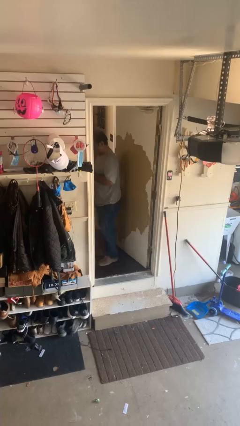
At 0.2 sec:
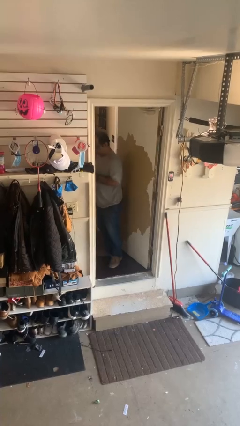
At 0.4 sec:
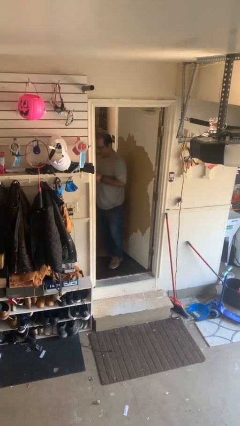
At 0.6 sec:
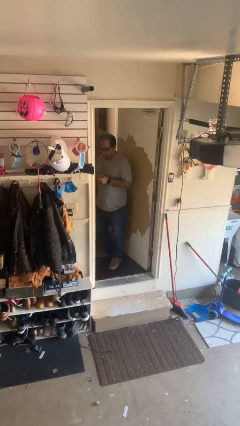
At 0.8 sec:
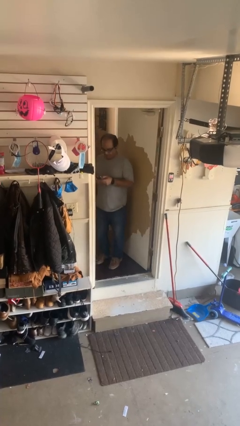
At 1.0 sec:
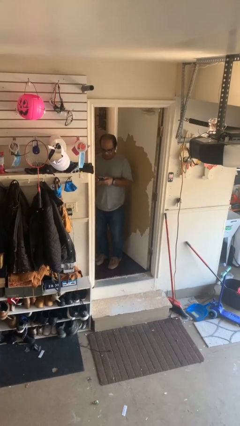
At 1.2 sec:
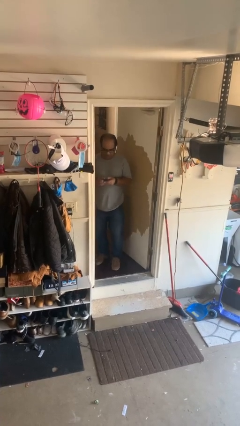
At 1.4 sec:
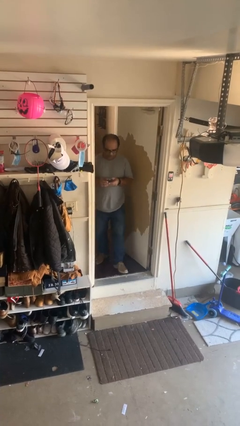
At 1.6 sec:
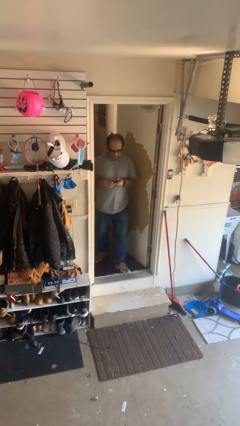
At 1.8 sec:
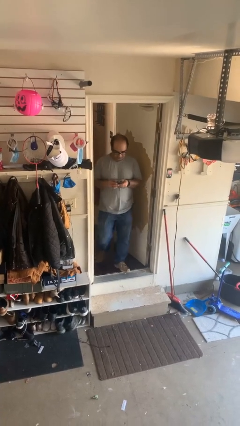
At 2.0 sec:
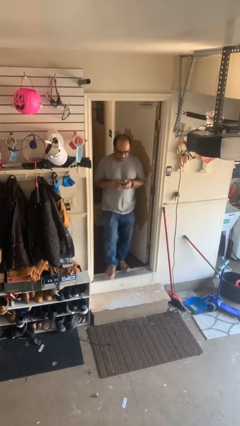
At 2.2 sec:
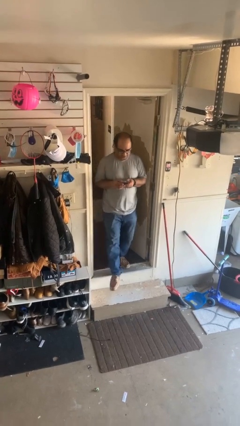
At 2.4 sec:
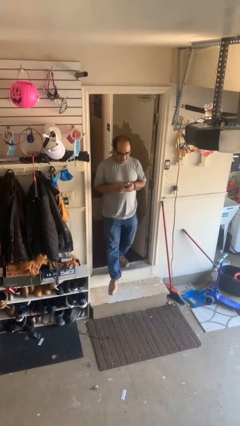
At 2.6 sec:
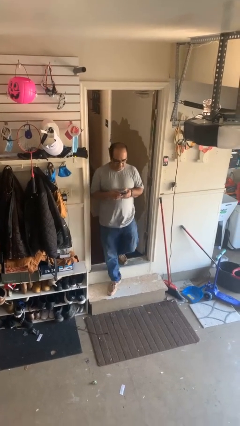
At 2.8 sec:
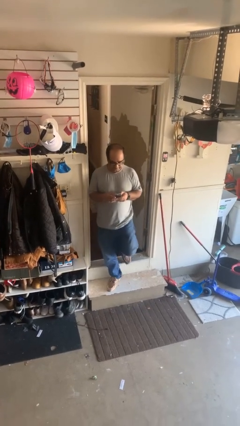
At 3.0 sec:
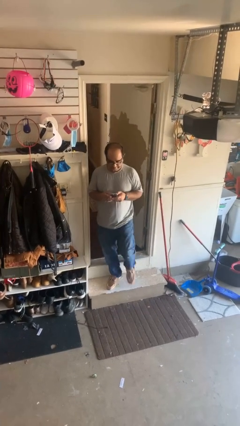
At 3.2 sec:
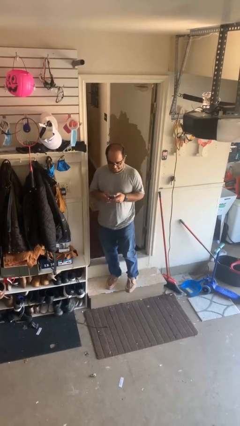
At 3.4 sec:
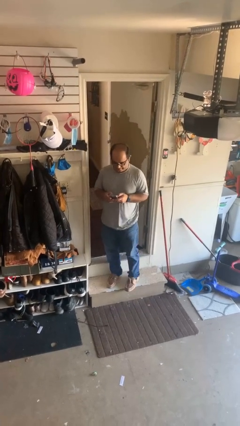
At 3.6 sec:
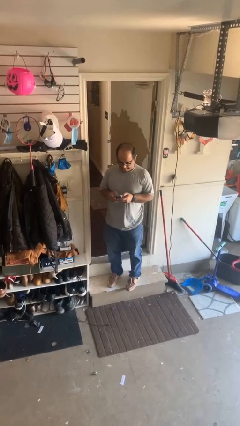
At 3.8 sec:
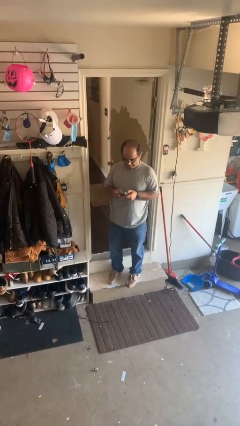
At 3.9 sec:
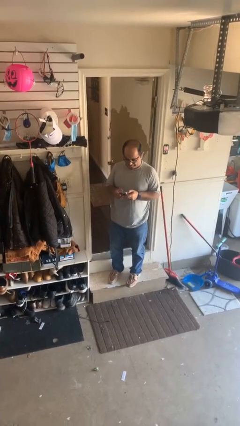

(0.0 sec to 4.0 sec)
person enters scene through structure

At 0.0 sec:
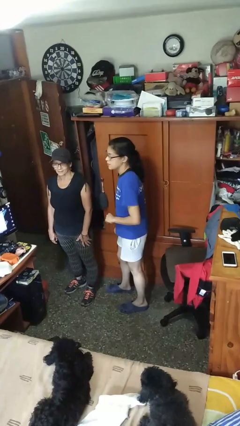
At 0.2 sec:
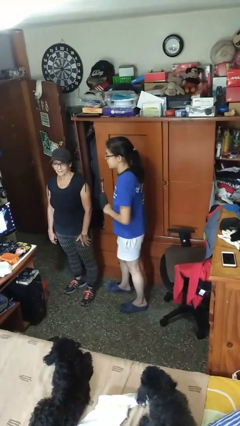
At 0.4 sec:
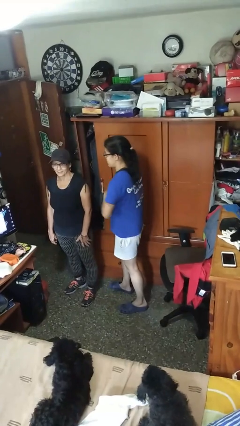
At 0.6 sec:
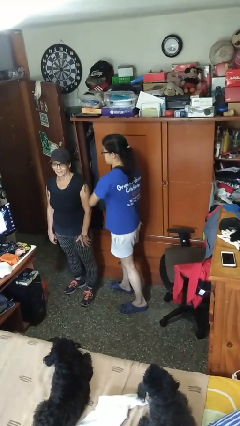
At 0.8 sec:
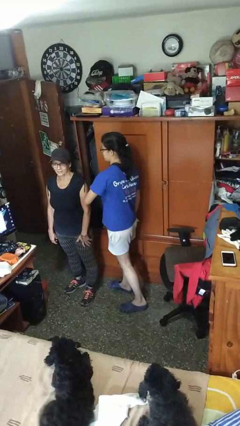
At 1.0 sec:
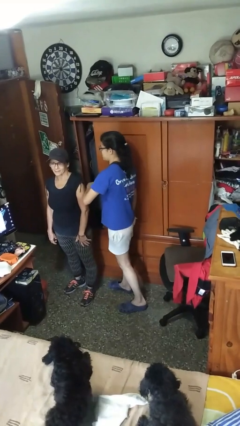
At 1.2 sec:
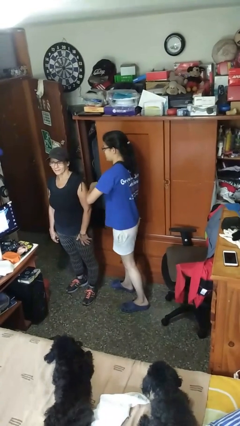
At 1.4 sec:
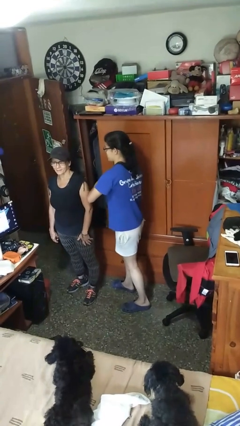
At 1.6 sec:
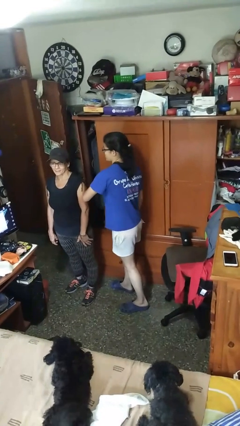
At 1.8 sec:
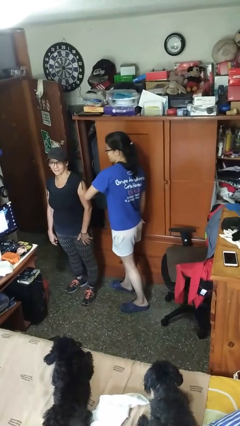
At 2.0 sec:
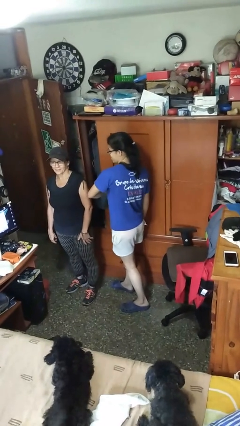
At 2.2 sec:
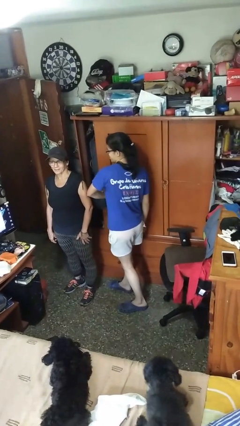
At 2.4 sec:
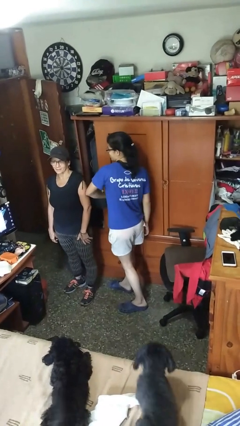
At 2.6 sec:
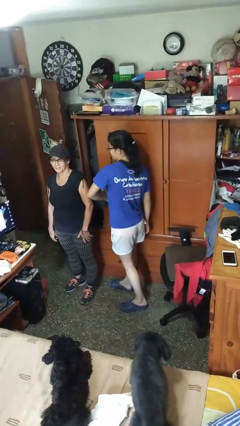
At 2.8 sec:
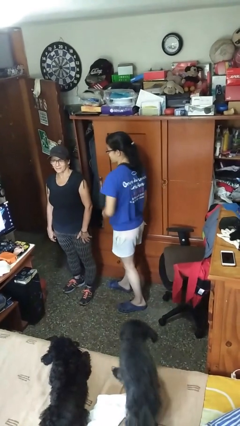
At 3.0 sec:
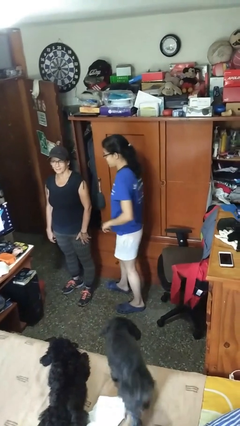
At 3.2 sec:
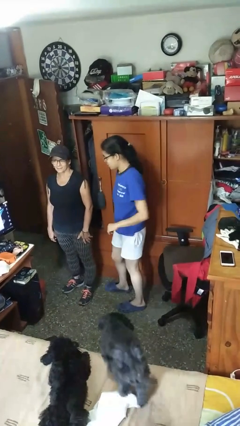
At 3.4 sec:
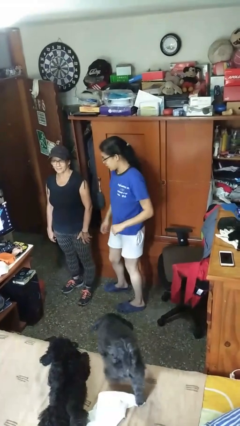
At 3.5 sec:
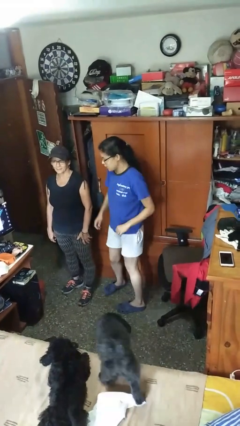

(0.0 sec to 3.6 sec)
person nudges person with elbow

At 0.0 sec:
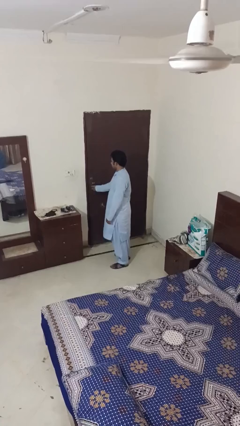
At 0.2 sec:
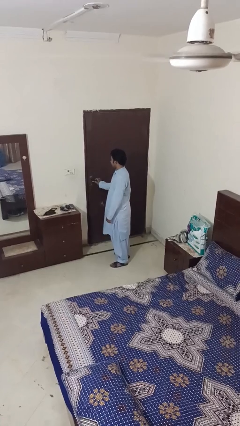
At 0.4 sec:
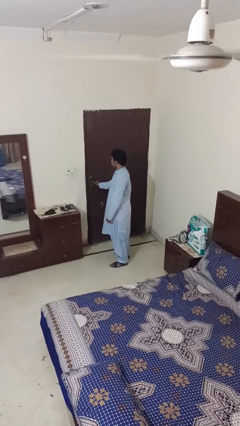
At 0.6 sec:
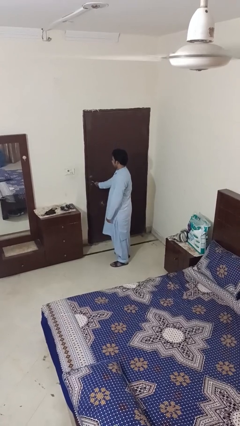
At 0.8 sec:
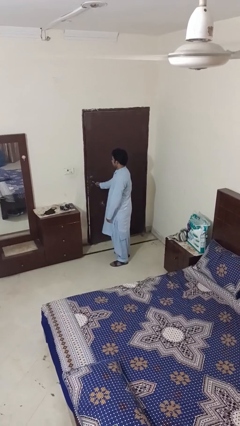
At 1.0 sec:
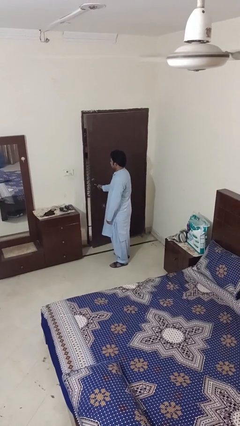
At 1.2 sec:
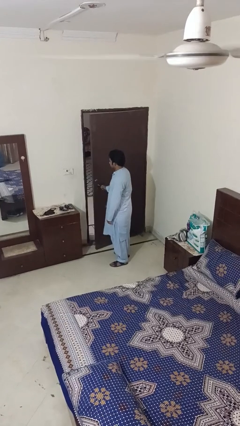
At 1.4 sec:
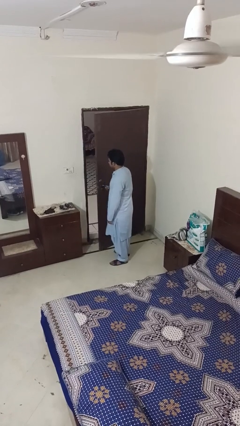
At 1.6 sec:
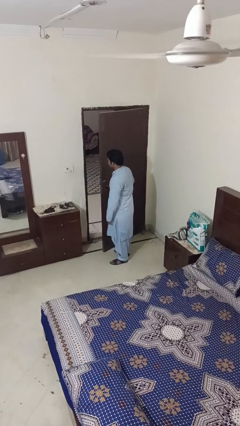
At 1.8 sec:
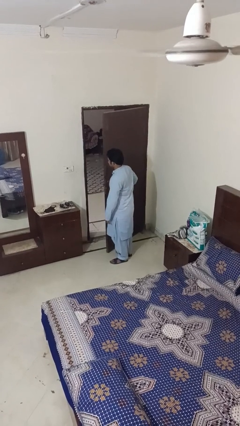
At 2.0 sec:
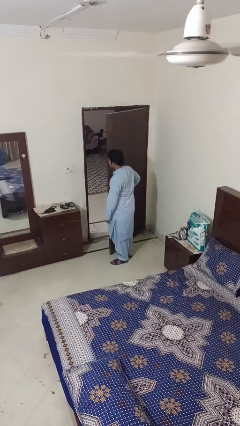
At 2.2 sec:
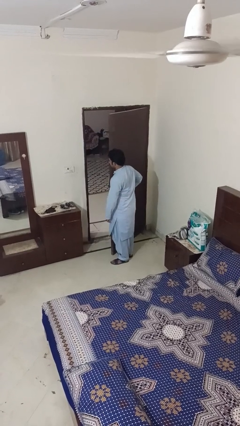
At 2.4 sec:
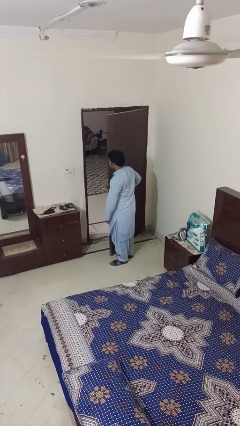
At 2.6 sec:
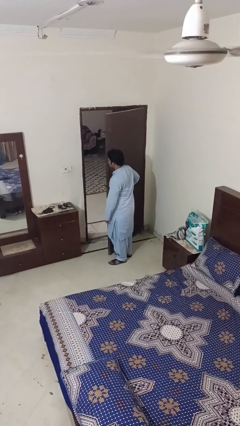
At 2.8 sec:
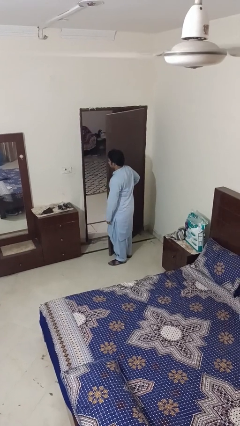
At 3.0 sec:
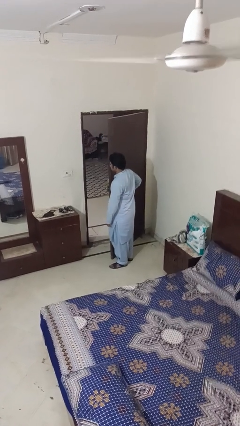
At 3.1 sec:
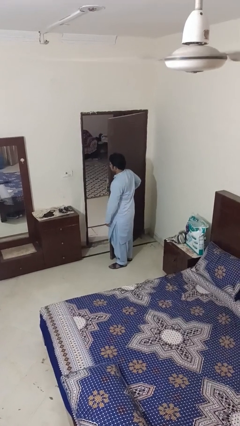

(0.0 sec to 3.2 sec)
person opens facility door

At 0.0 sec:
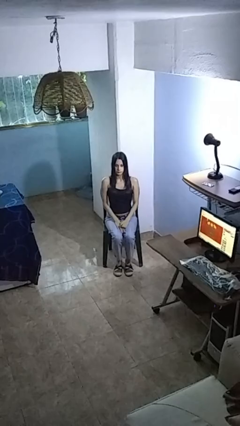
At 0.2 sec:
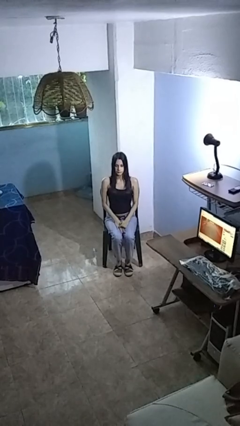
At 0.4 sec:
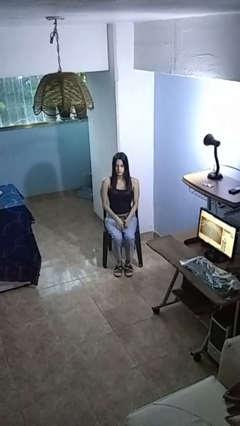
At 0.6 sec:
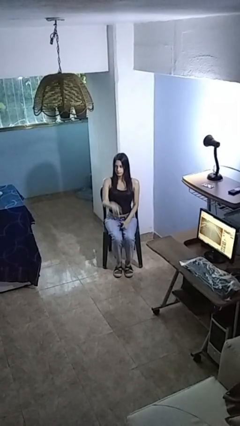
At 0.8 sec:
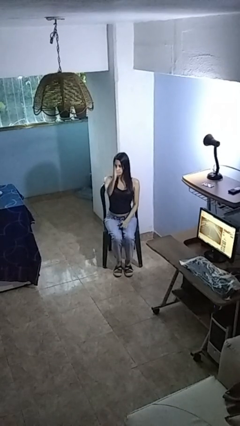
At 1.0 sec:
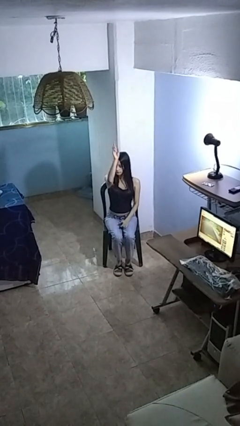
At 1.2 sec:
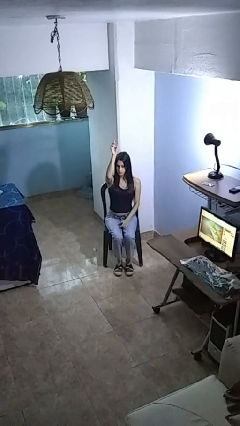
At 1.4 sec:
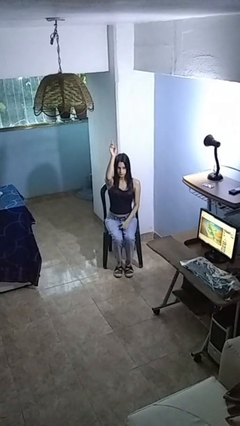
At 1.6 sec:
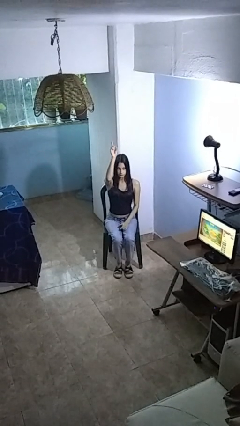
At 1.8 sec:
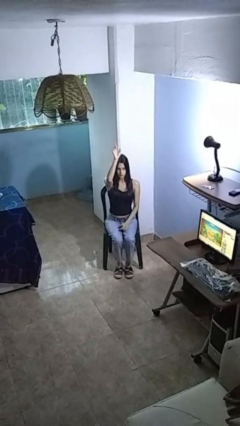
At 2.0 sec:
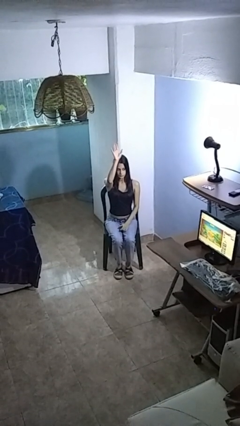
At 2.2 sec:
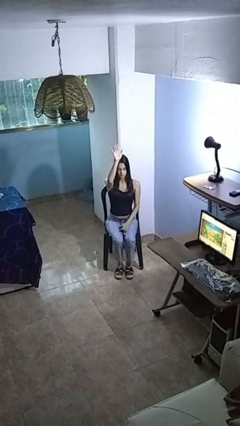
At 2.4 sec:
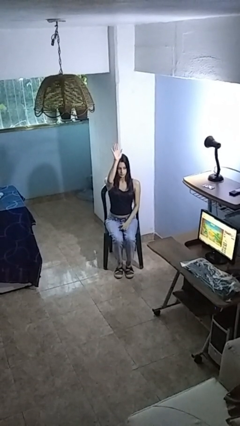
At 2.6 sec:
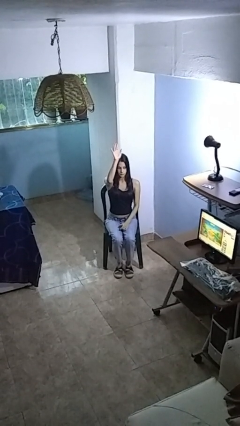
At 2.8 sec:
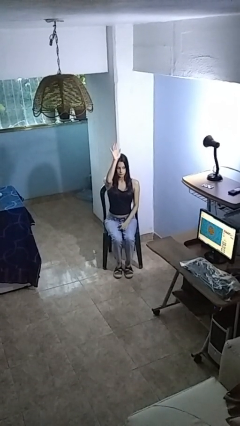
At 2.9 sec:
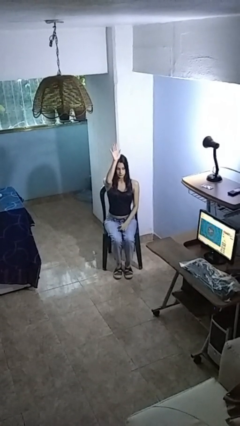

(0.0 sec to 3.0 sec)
person gestures raise hand

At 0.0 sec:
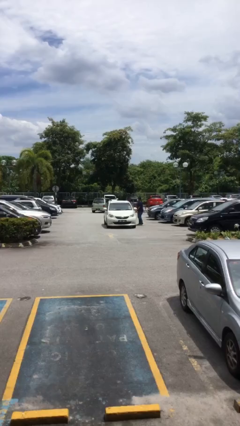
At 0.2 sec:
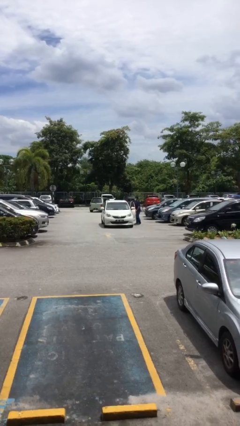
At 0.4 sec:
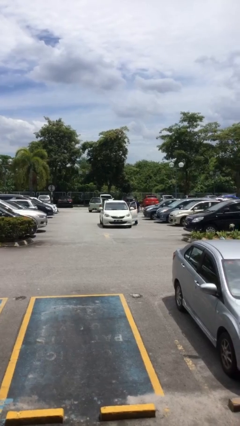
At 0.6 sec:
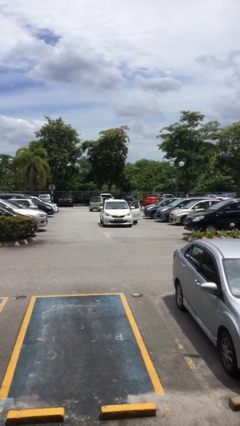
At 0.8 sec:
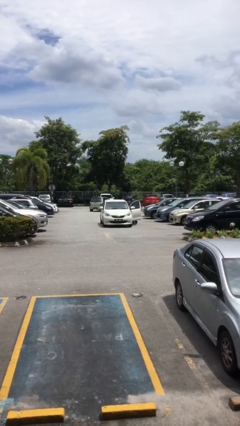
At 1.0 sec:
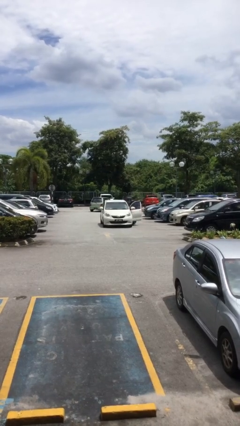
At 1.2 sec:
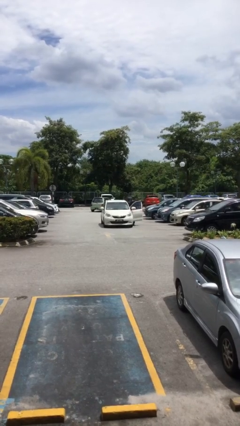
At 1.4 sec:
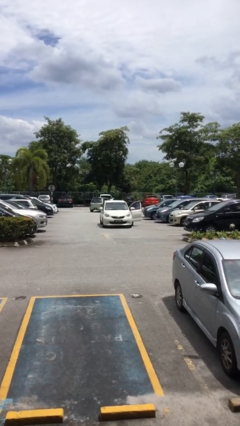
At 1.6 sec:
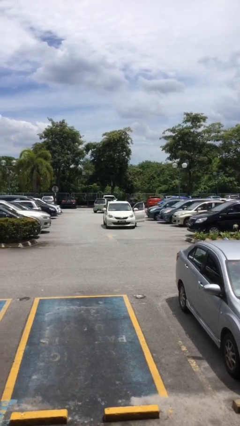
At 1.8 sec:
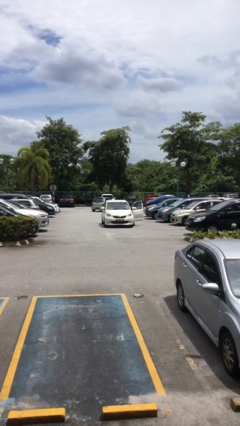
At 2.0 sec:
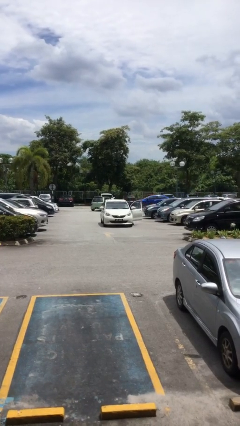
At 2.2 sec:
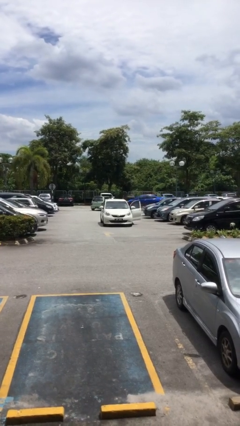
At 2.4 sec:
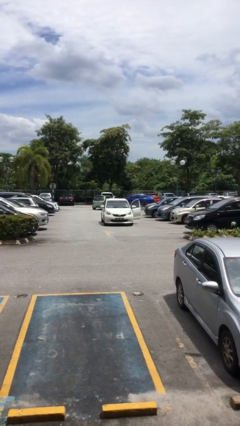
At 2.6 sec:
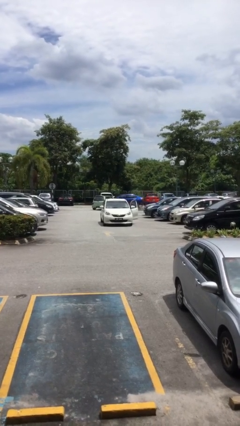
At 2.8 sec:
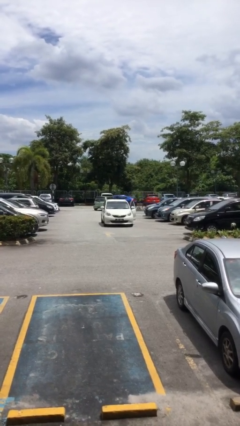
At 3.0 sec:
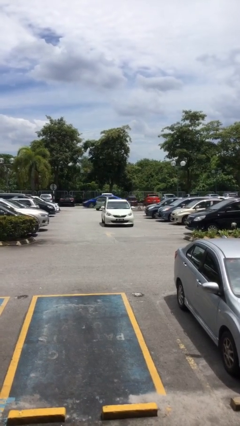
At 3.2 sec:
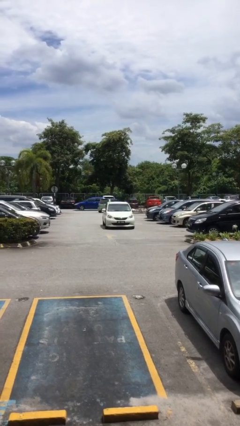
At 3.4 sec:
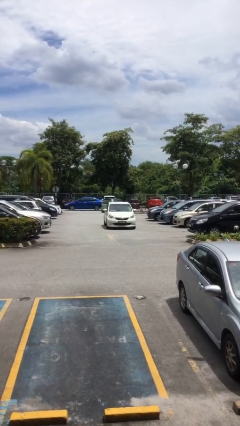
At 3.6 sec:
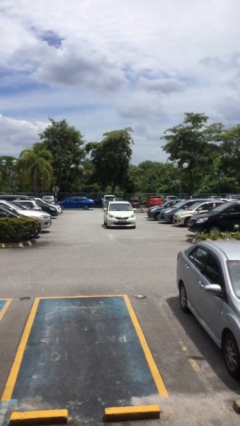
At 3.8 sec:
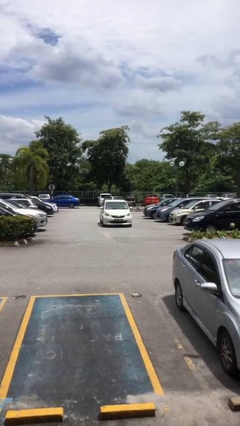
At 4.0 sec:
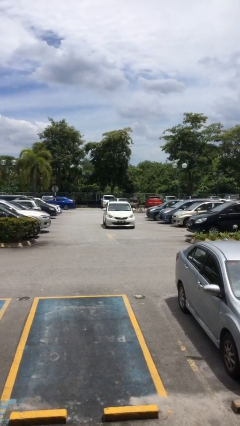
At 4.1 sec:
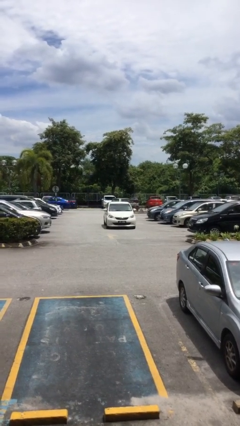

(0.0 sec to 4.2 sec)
car picks up person
